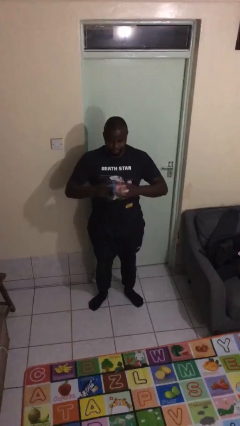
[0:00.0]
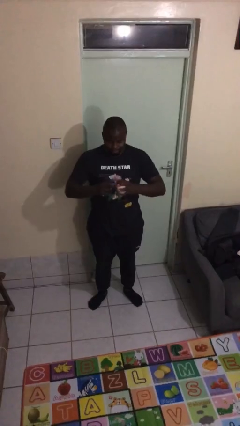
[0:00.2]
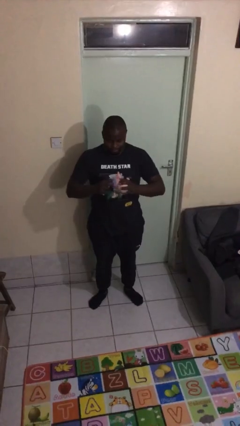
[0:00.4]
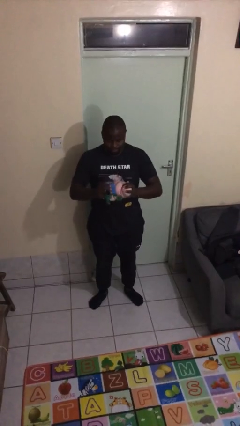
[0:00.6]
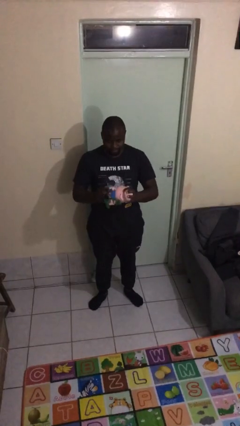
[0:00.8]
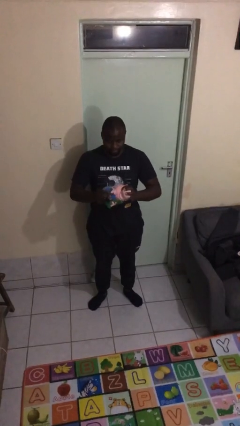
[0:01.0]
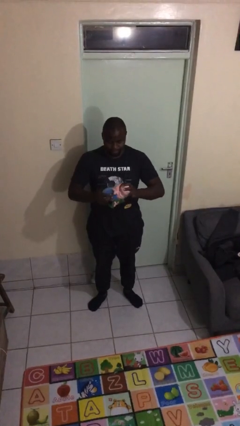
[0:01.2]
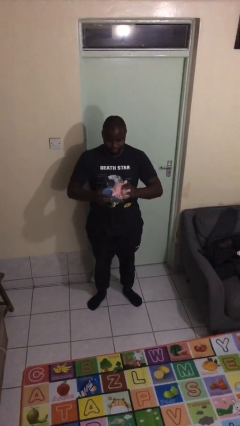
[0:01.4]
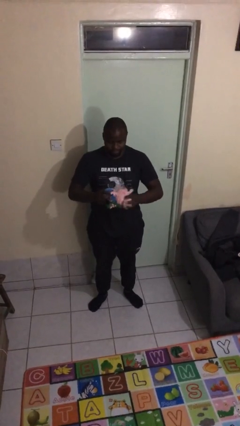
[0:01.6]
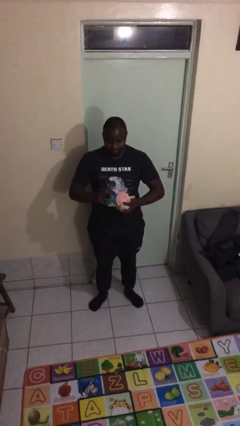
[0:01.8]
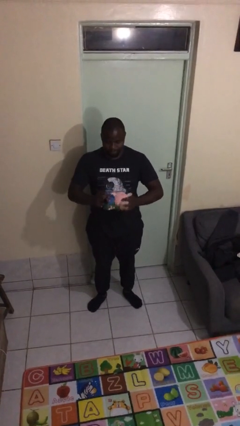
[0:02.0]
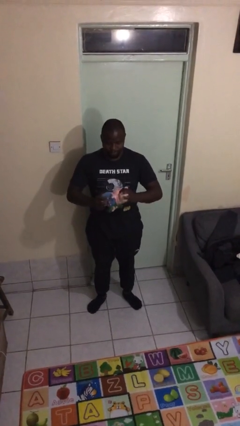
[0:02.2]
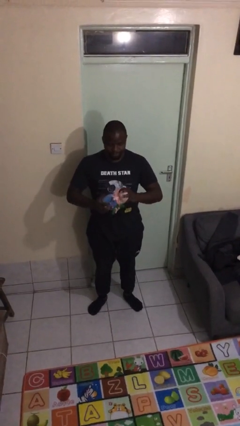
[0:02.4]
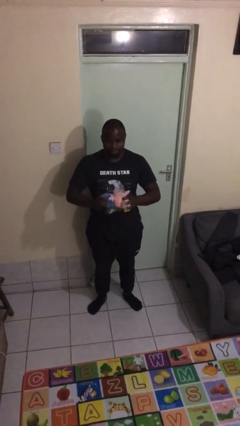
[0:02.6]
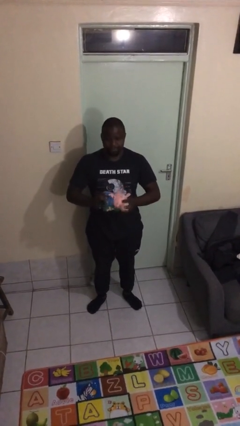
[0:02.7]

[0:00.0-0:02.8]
person squeezes object

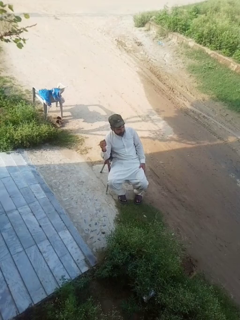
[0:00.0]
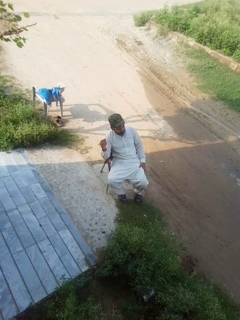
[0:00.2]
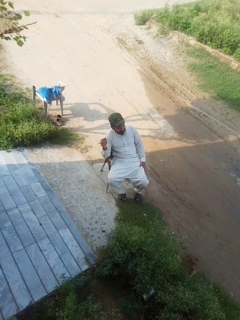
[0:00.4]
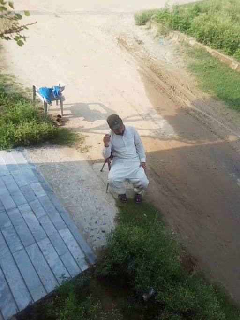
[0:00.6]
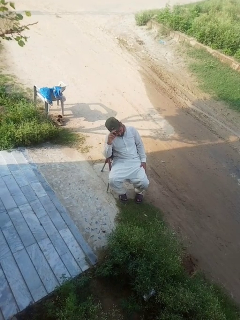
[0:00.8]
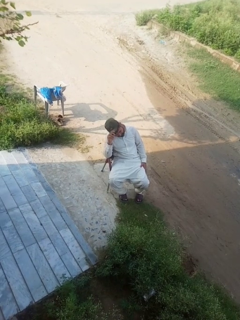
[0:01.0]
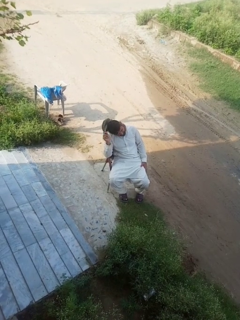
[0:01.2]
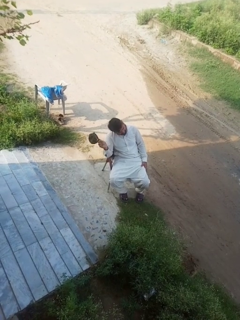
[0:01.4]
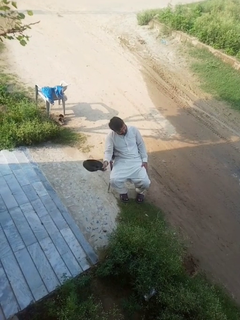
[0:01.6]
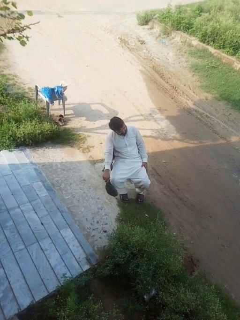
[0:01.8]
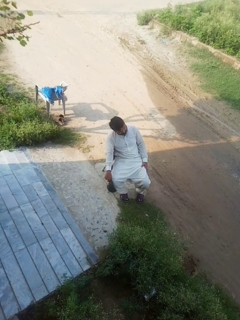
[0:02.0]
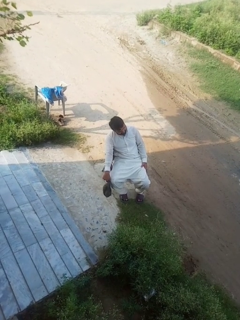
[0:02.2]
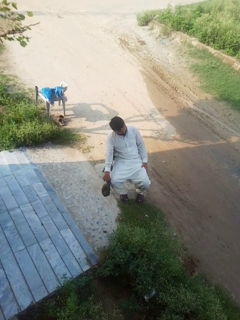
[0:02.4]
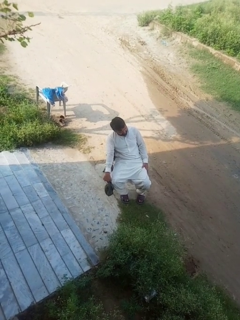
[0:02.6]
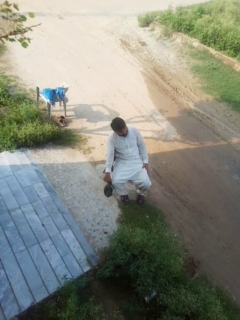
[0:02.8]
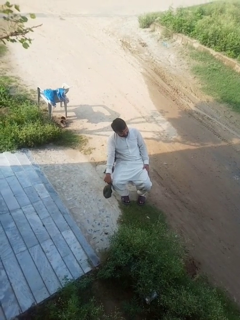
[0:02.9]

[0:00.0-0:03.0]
person takes off hat

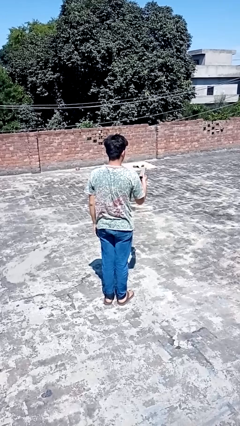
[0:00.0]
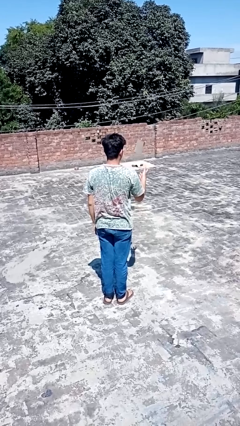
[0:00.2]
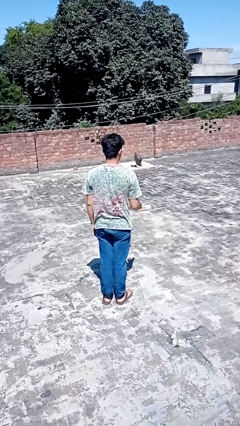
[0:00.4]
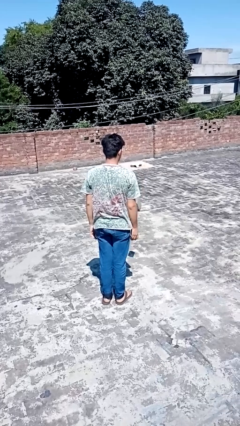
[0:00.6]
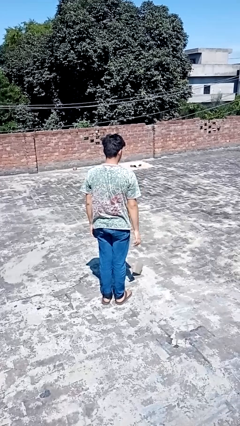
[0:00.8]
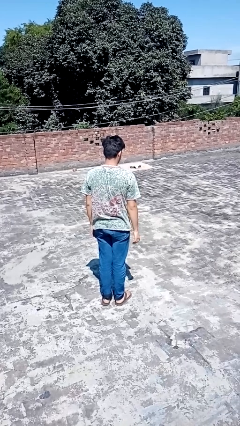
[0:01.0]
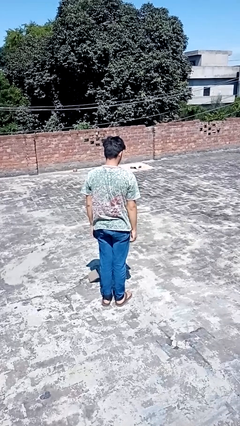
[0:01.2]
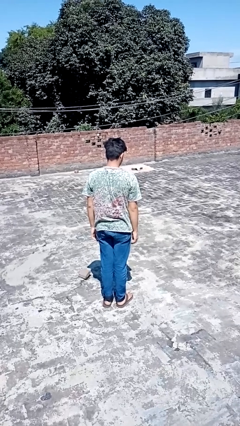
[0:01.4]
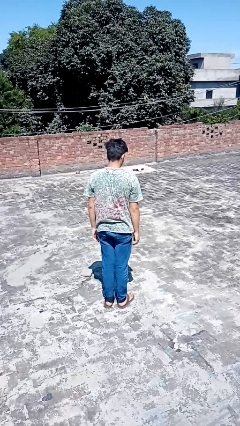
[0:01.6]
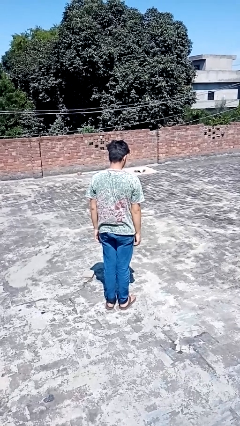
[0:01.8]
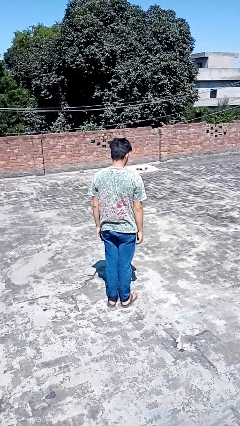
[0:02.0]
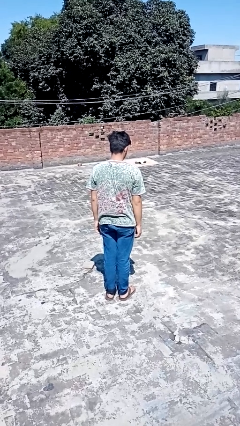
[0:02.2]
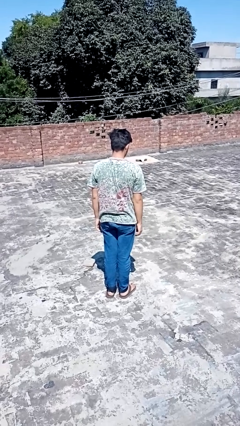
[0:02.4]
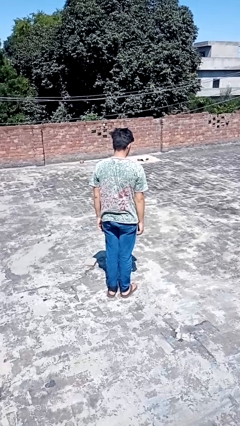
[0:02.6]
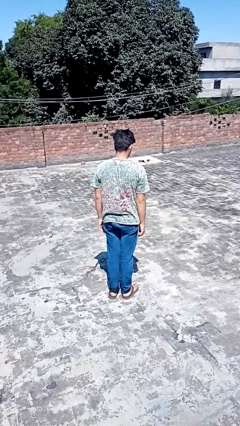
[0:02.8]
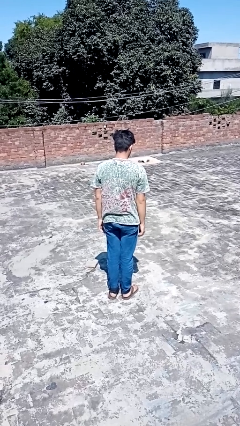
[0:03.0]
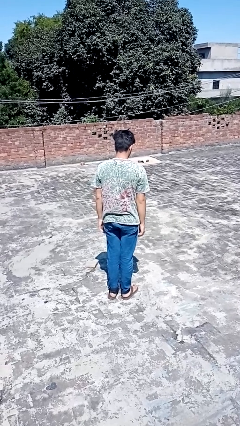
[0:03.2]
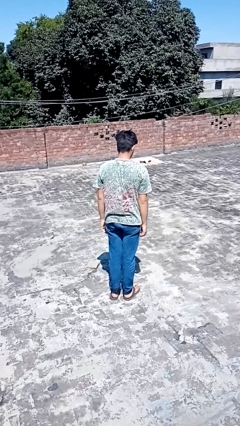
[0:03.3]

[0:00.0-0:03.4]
person throws object into air

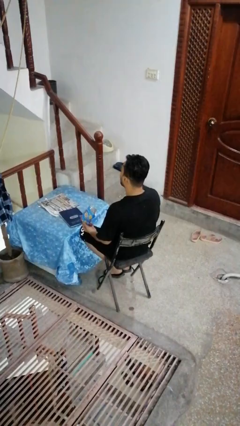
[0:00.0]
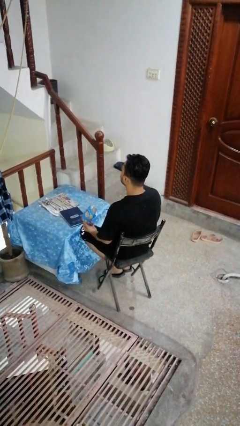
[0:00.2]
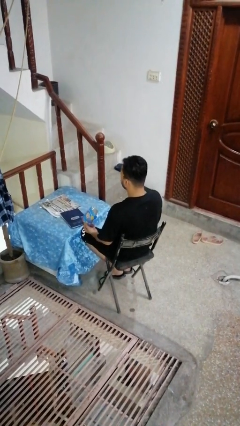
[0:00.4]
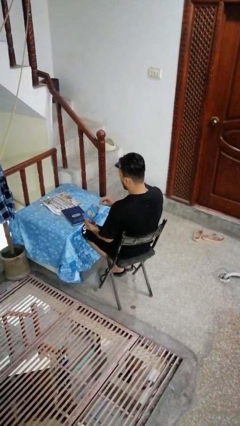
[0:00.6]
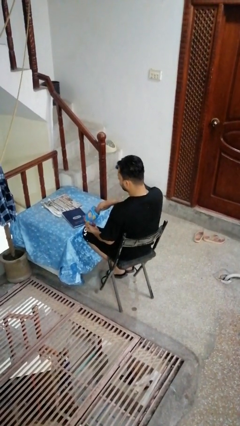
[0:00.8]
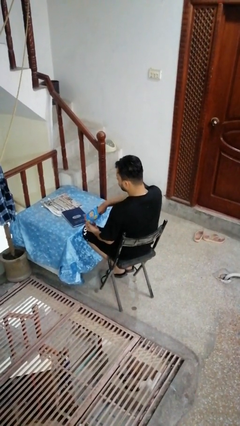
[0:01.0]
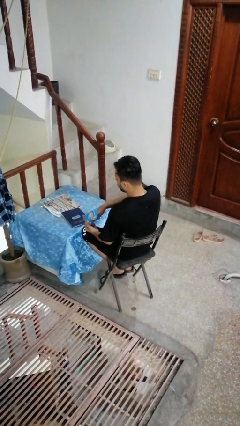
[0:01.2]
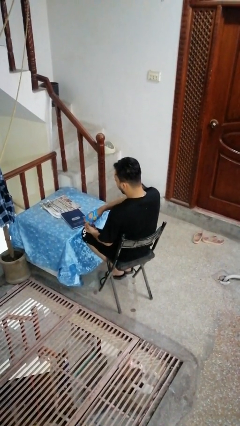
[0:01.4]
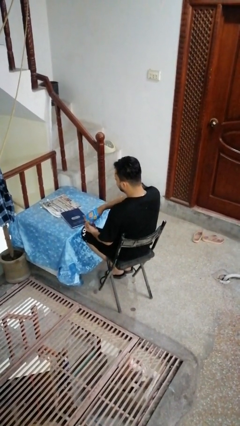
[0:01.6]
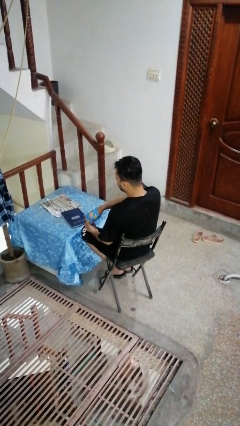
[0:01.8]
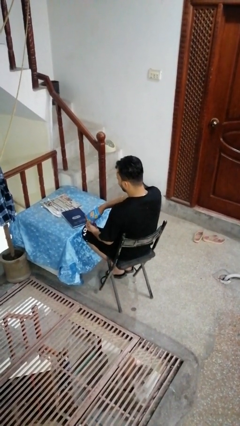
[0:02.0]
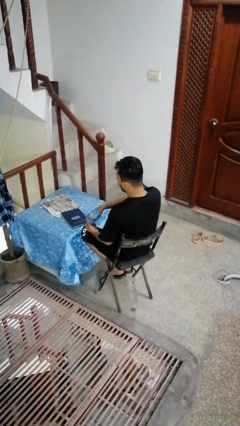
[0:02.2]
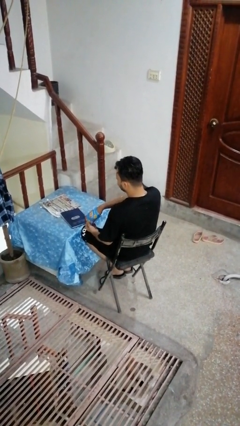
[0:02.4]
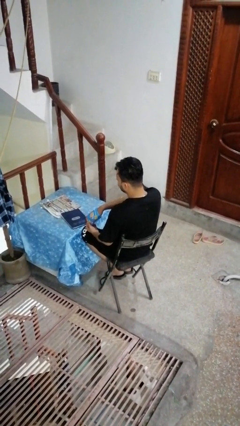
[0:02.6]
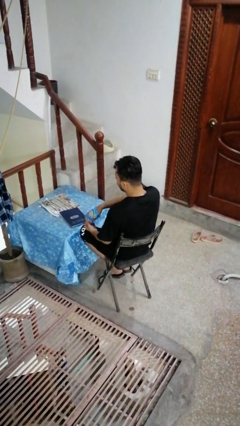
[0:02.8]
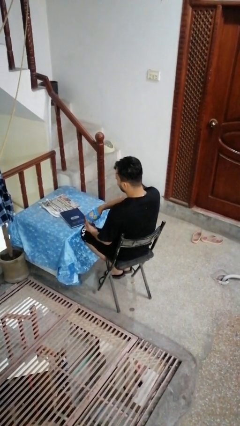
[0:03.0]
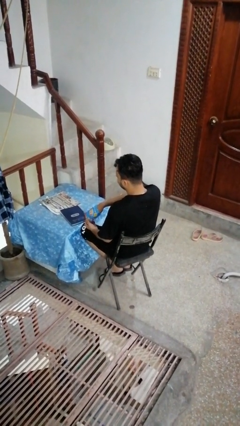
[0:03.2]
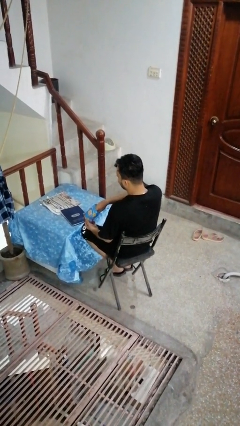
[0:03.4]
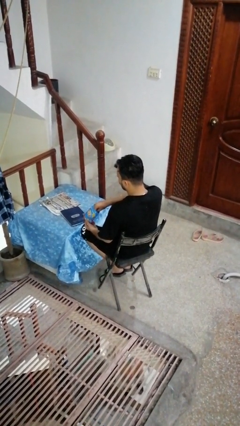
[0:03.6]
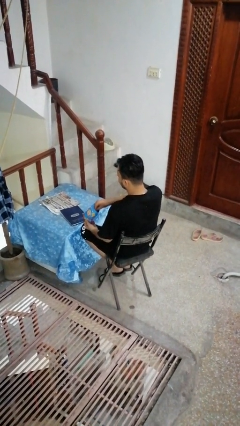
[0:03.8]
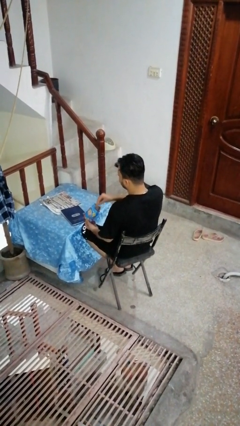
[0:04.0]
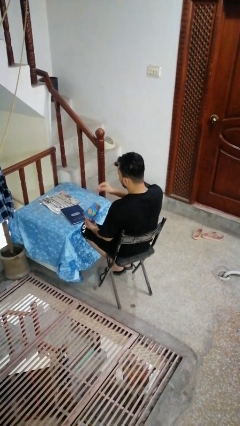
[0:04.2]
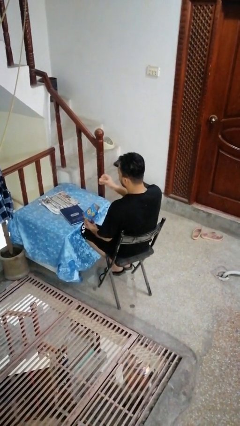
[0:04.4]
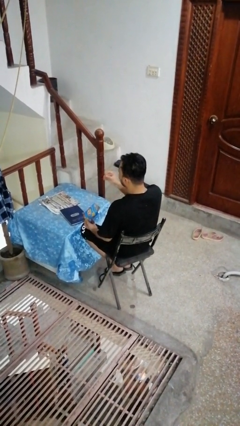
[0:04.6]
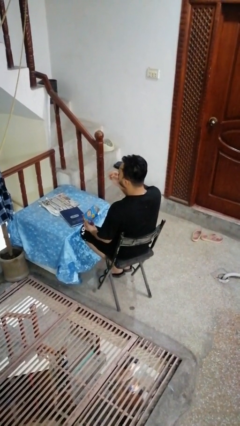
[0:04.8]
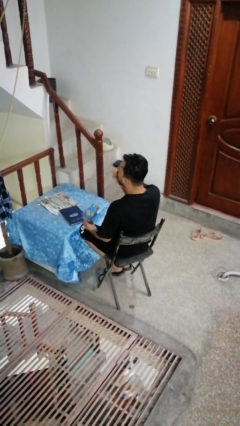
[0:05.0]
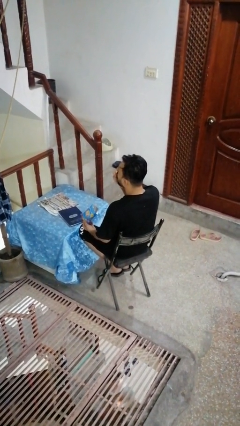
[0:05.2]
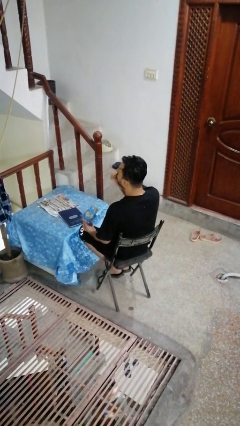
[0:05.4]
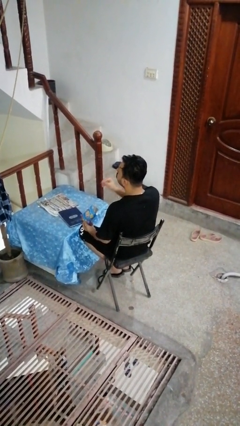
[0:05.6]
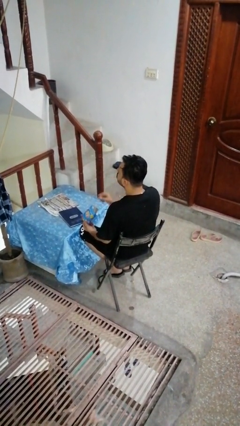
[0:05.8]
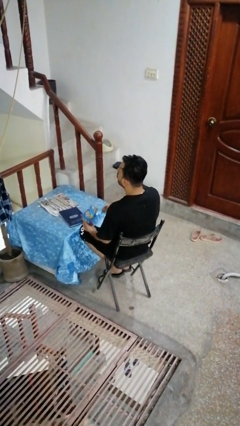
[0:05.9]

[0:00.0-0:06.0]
person eats snack from bag

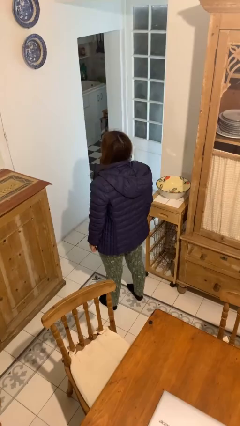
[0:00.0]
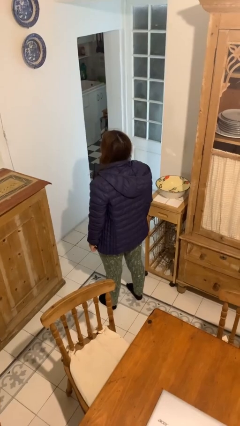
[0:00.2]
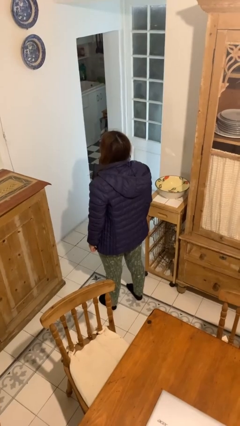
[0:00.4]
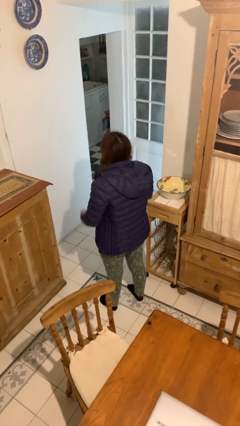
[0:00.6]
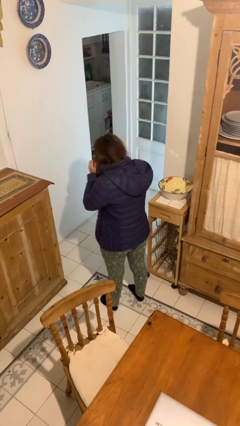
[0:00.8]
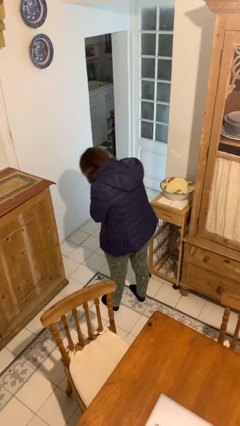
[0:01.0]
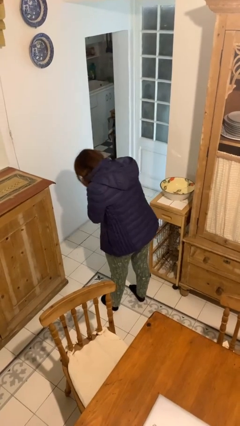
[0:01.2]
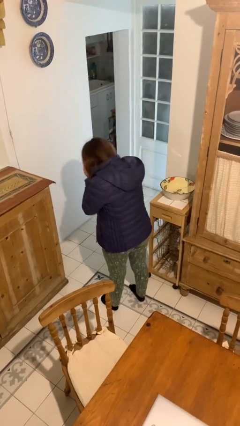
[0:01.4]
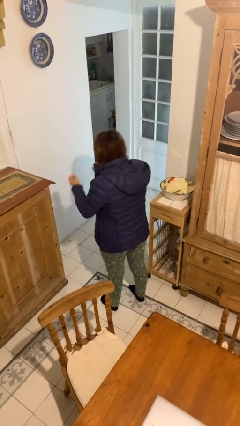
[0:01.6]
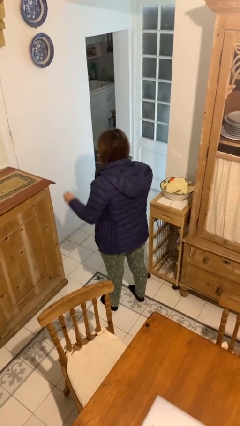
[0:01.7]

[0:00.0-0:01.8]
person sneezes into hand

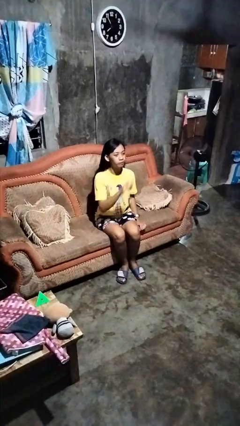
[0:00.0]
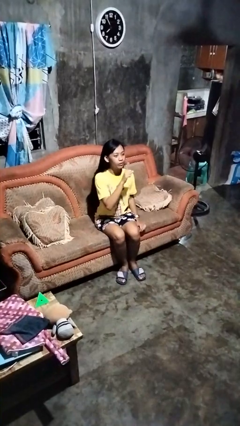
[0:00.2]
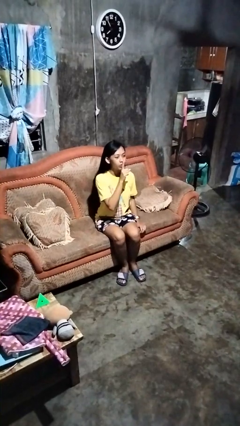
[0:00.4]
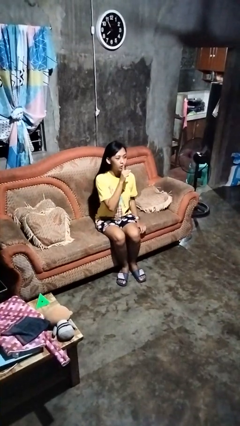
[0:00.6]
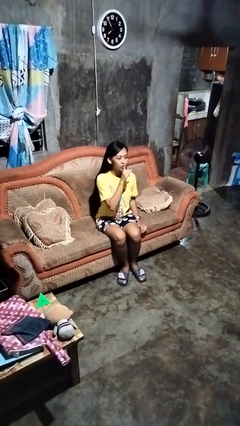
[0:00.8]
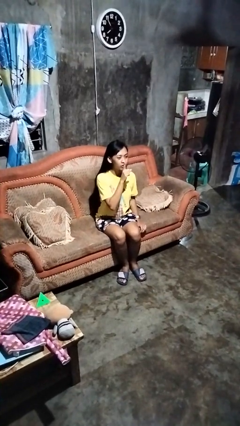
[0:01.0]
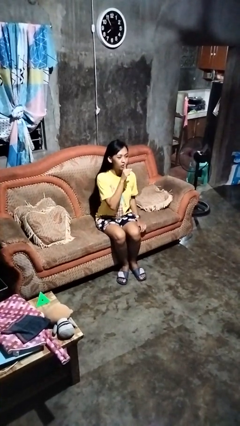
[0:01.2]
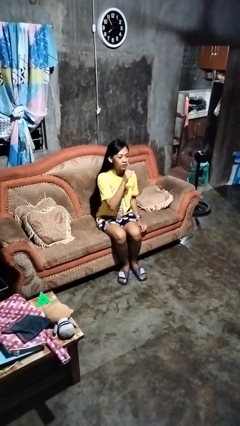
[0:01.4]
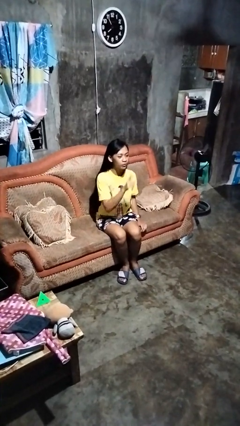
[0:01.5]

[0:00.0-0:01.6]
person gestures be quiet
